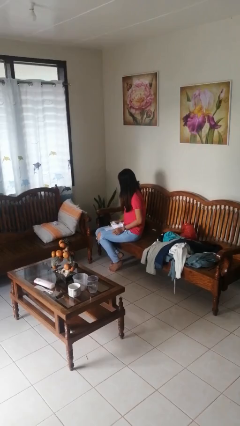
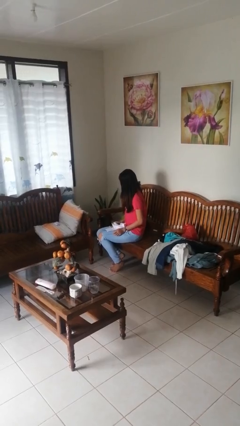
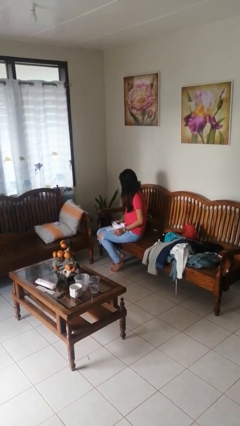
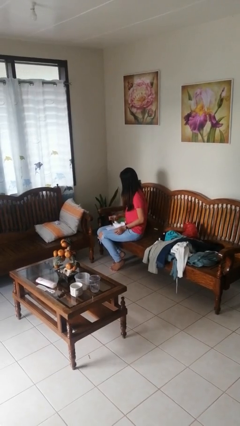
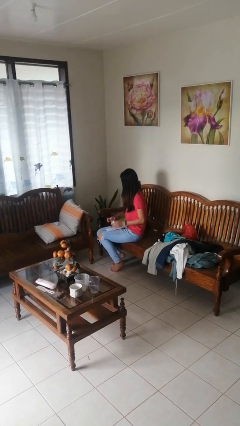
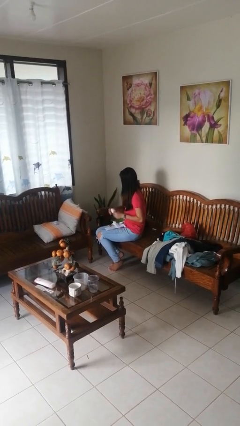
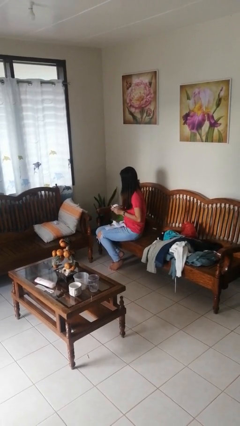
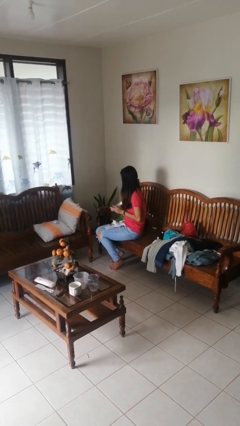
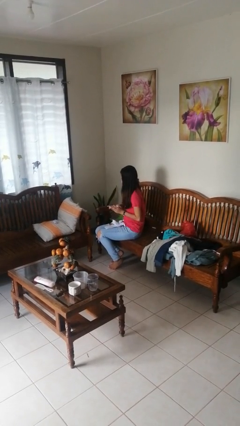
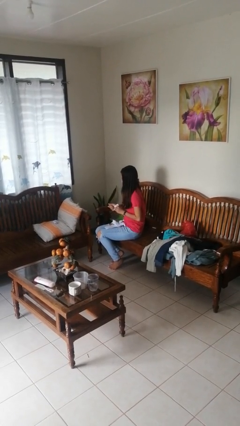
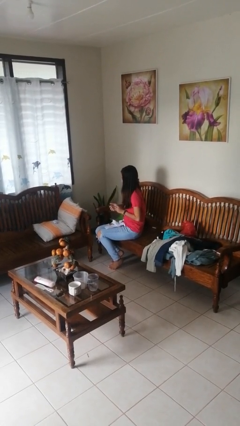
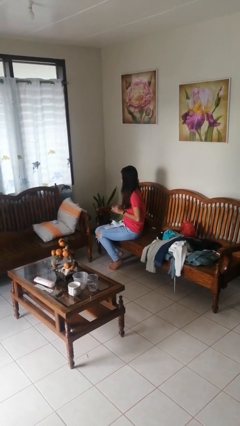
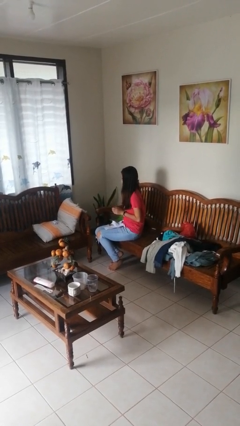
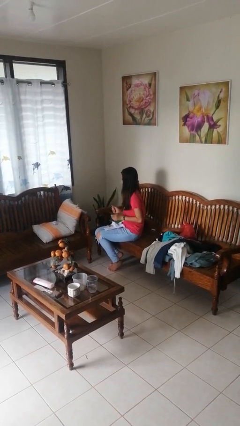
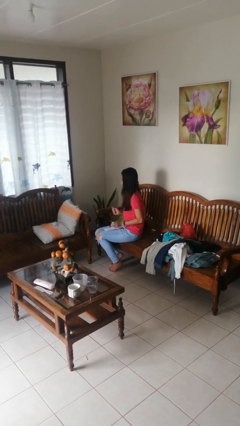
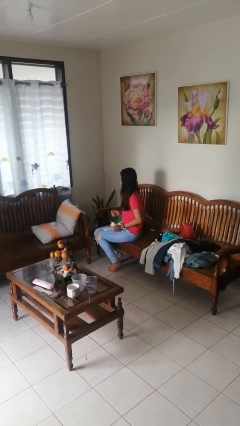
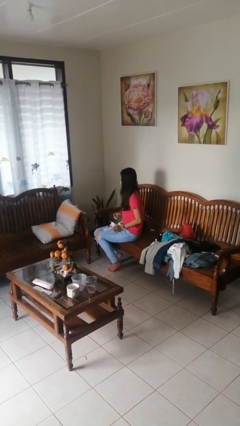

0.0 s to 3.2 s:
person crumples paper

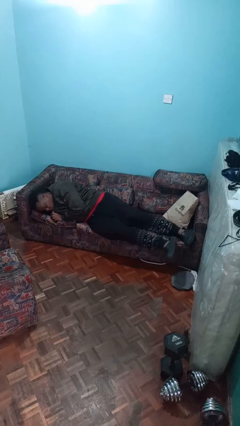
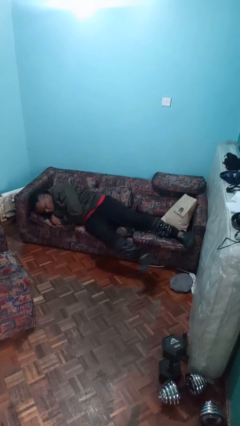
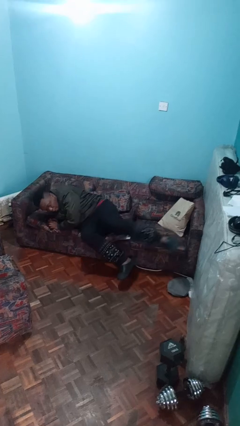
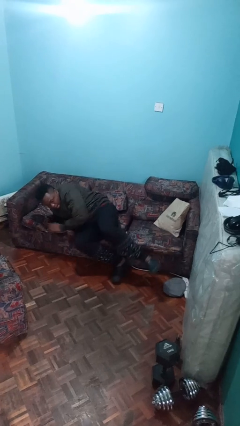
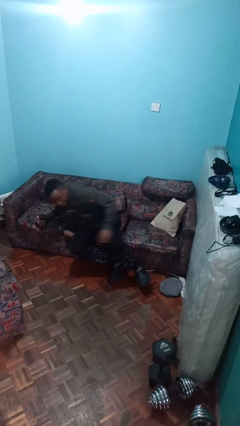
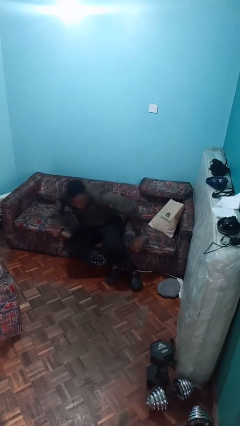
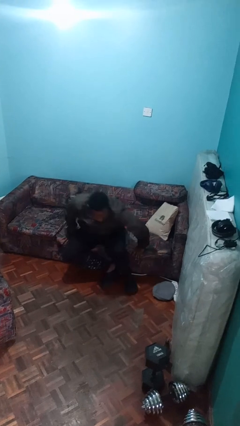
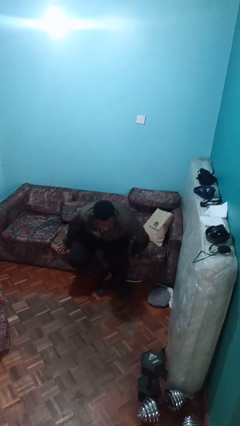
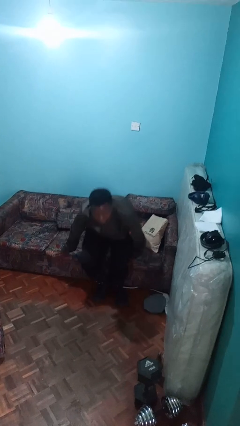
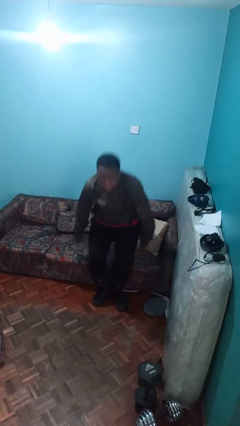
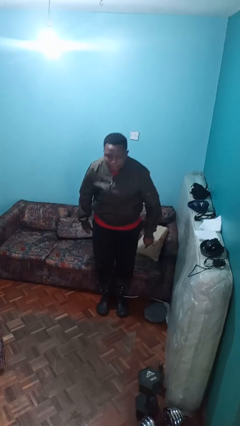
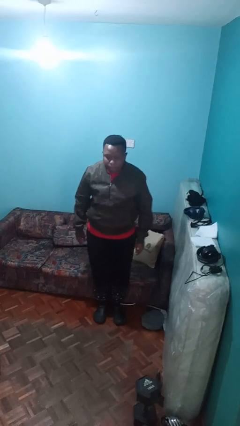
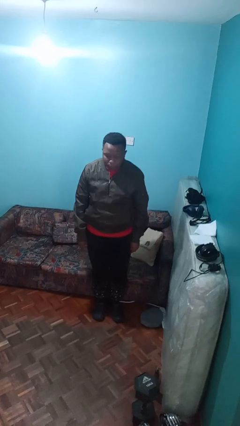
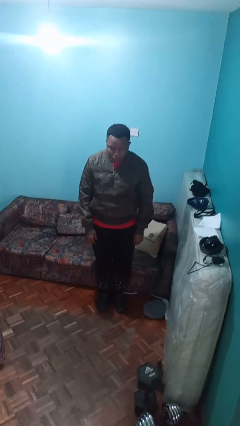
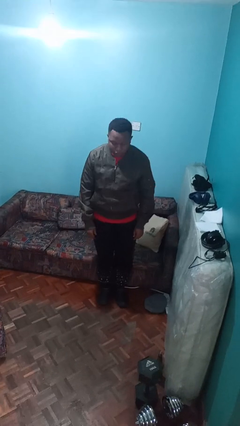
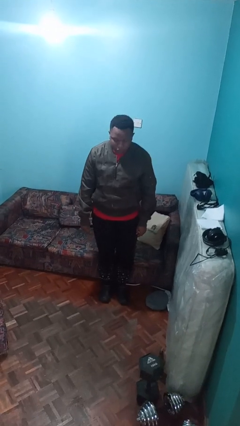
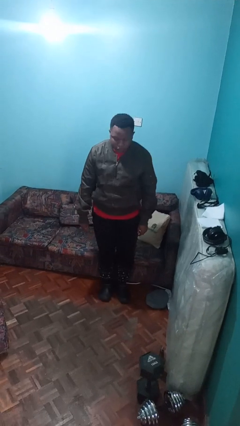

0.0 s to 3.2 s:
person stands up

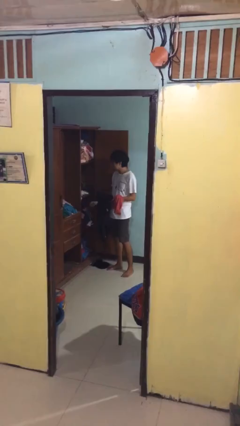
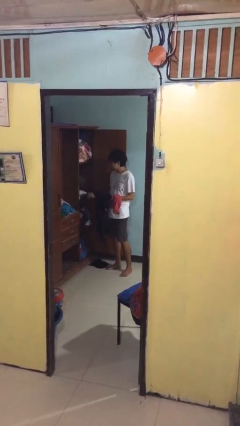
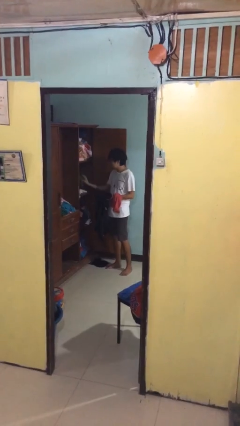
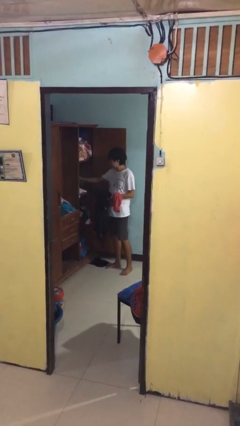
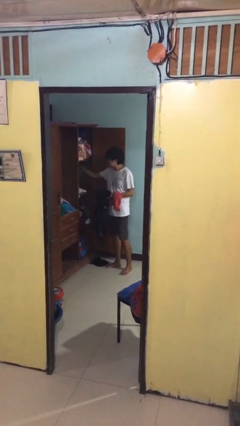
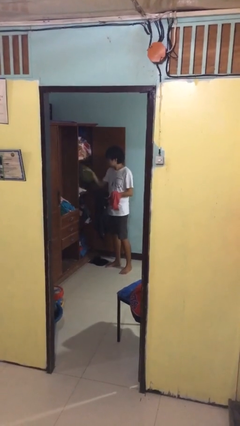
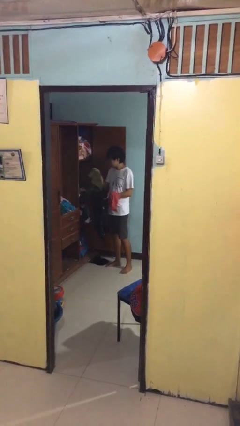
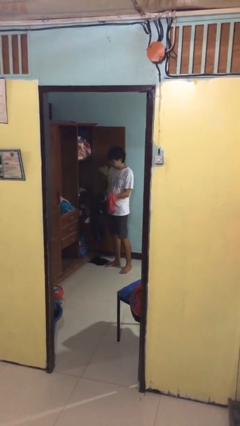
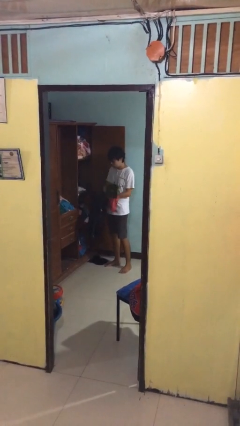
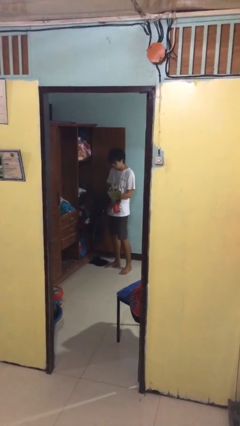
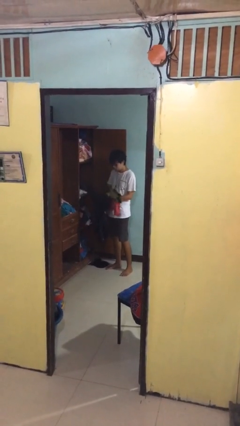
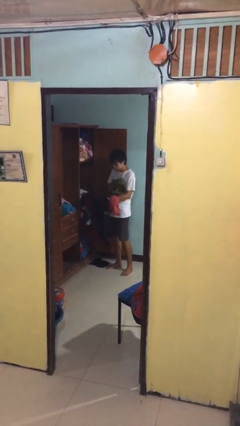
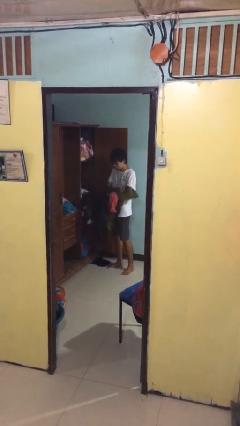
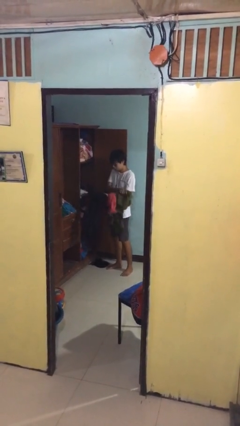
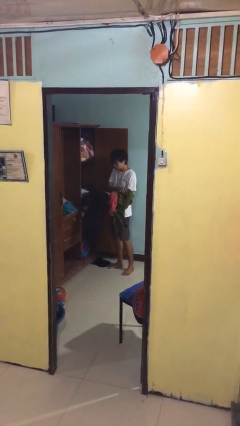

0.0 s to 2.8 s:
person takes clothes from dresser

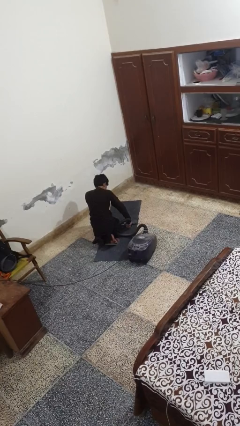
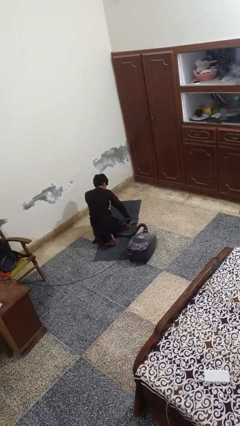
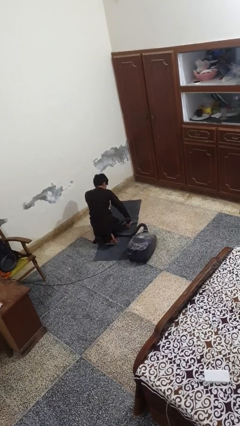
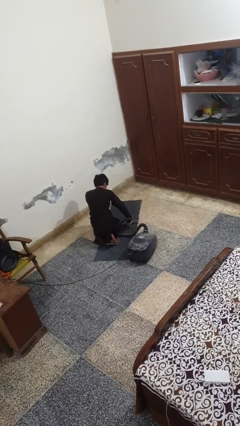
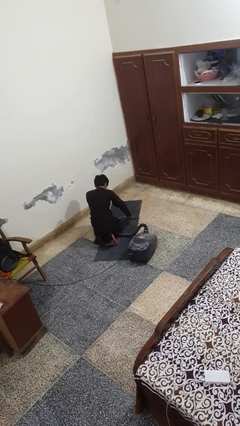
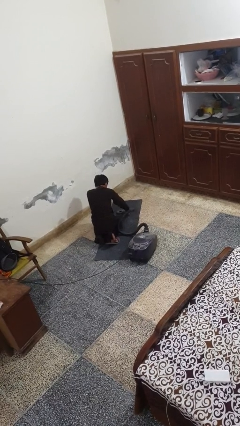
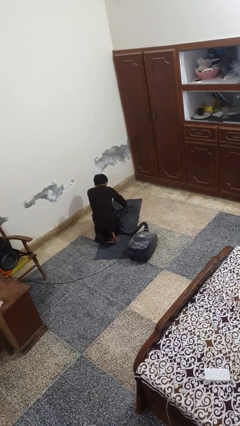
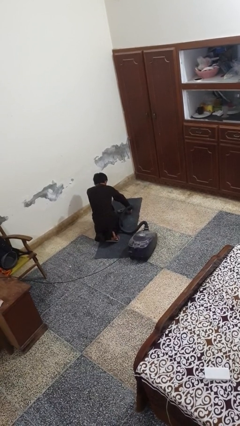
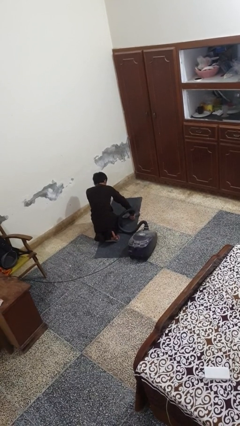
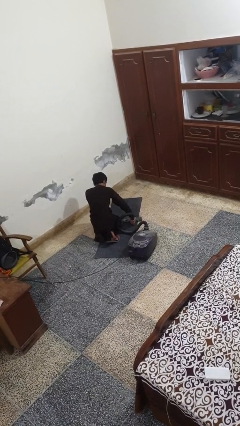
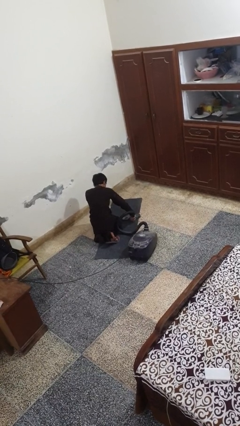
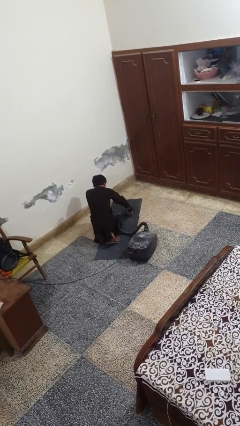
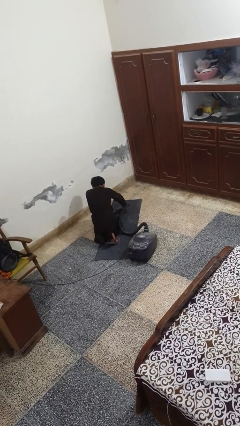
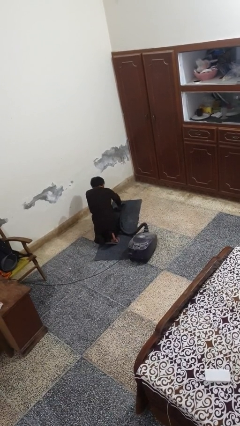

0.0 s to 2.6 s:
person vacuums carpet

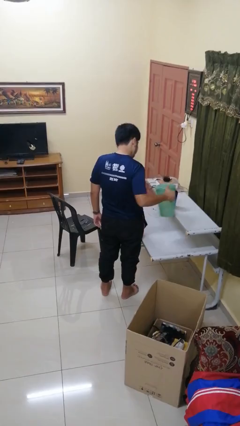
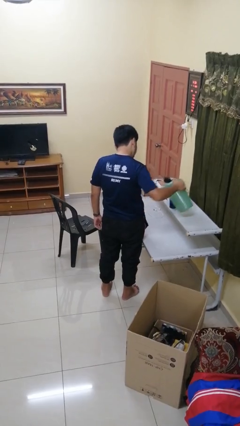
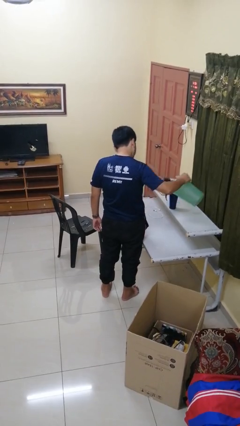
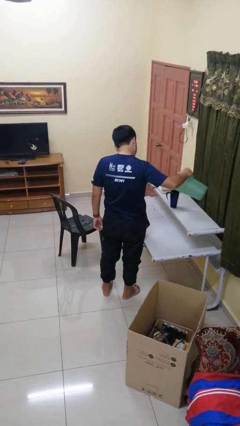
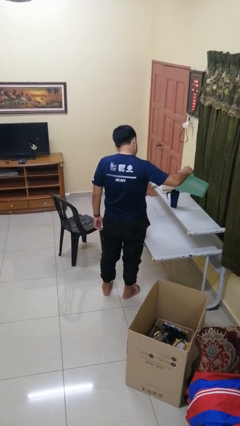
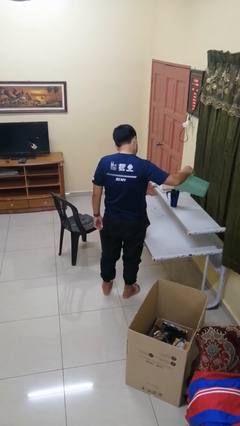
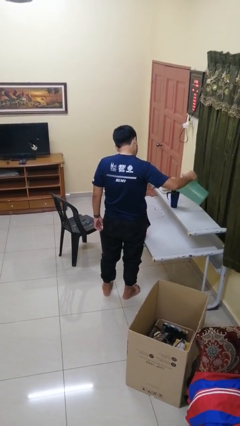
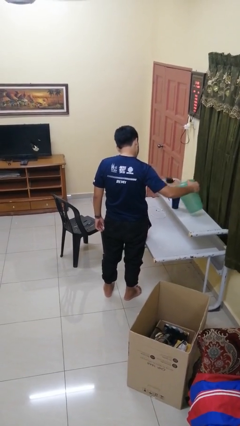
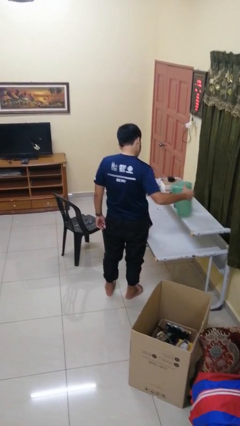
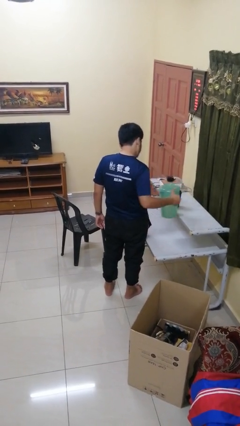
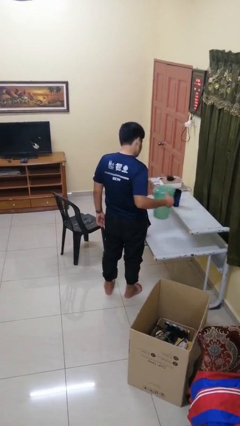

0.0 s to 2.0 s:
person pours coffee into mug

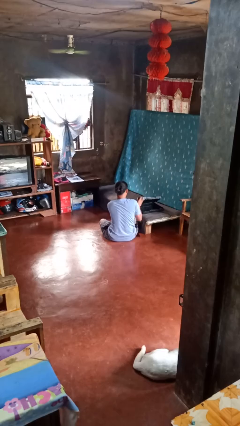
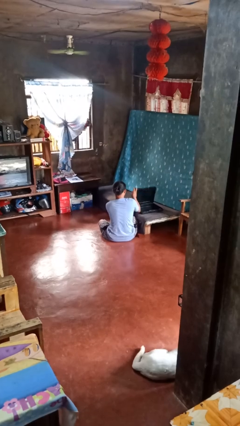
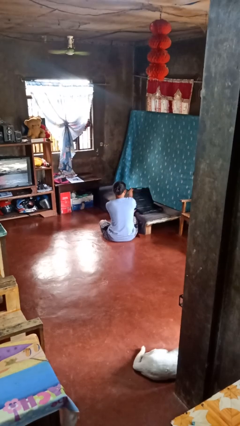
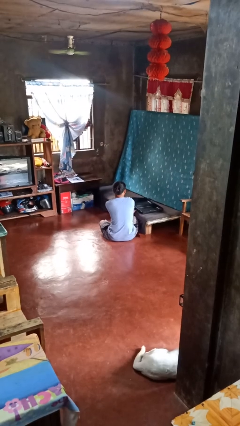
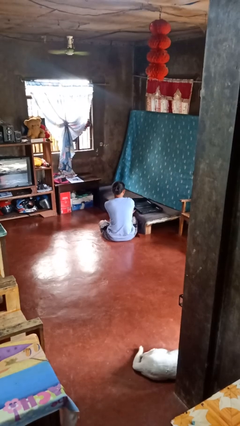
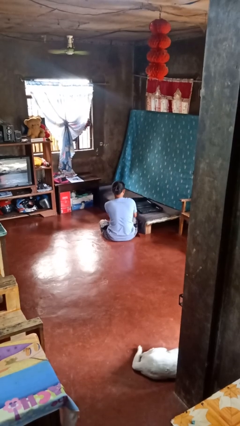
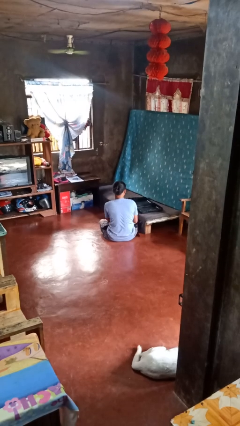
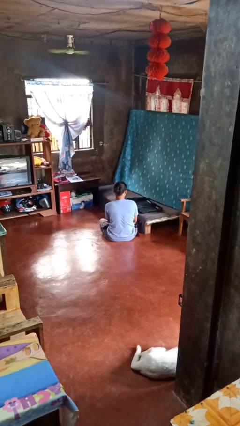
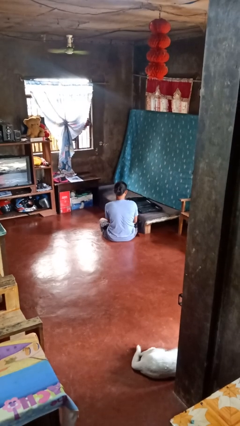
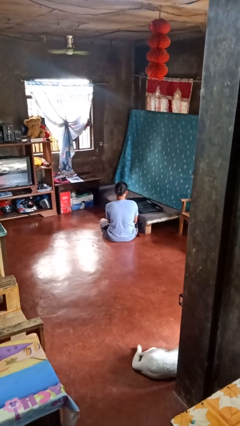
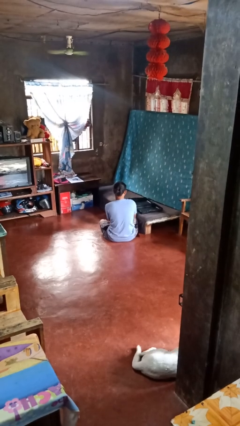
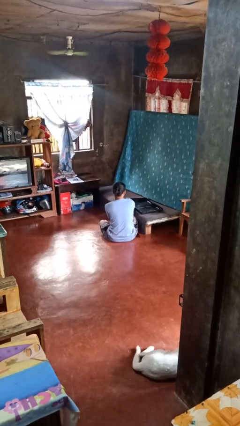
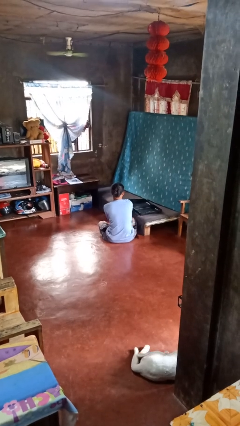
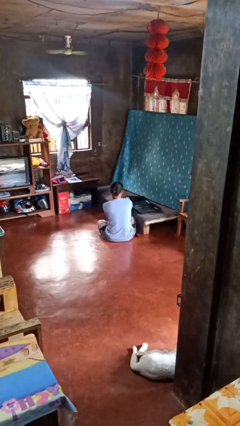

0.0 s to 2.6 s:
person opens suitcase

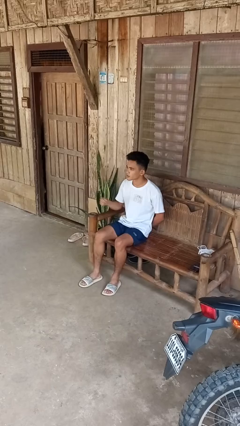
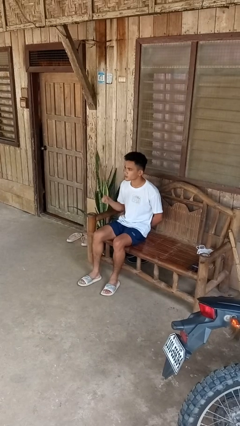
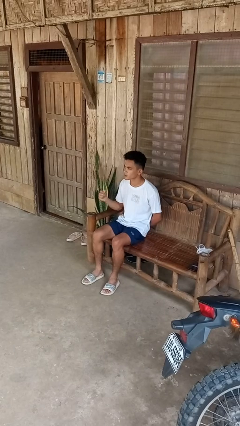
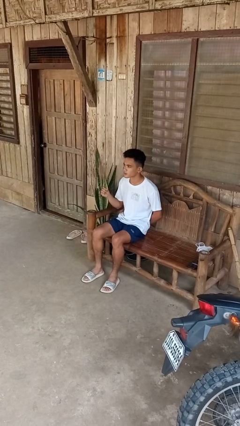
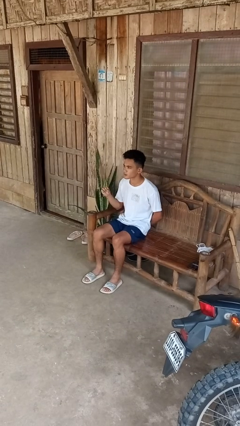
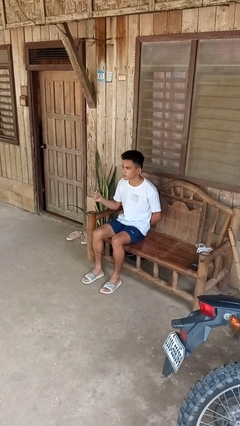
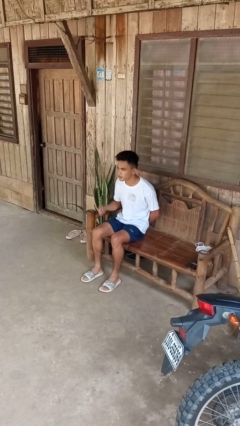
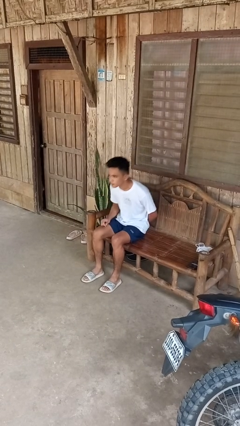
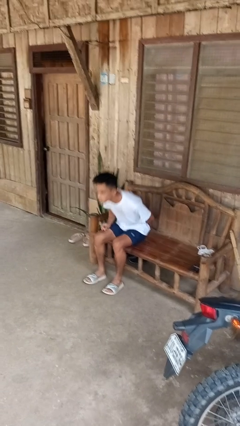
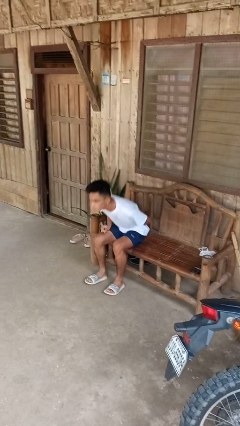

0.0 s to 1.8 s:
person snaps fingers
